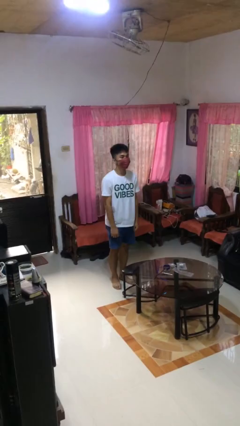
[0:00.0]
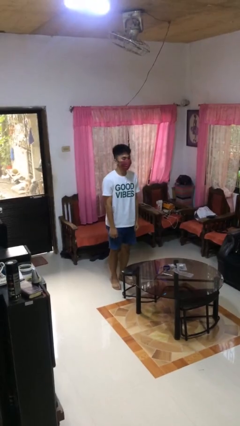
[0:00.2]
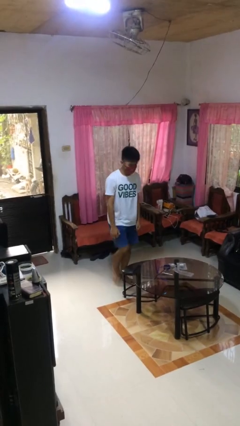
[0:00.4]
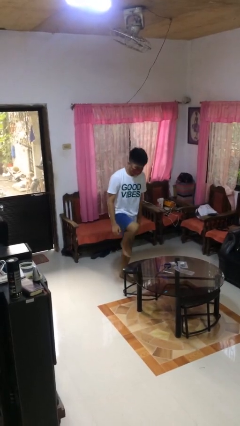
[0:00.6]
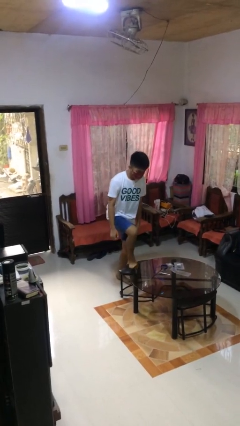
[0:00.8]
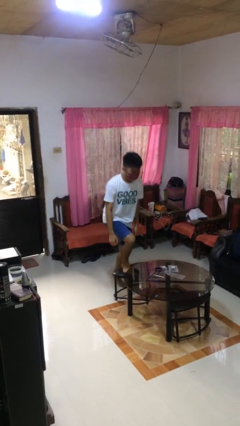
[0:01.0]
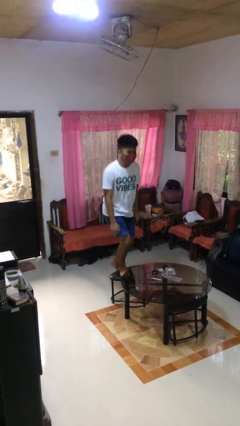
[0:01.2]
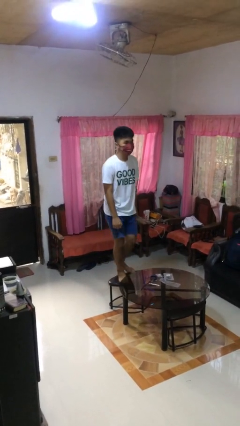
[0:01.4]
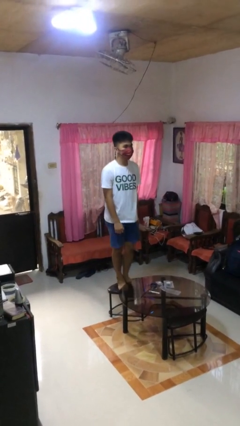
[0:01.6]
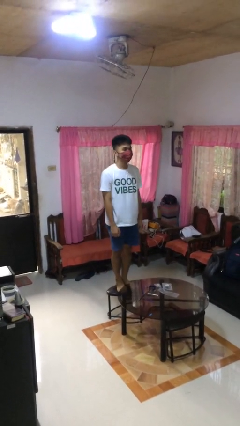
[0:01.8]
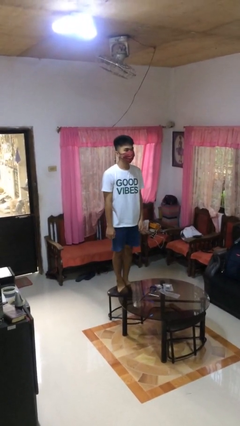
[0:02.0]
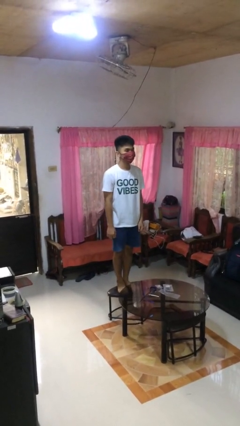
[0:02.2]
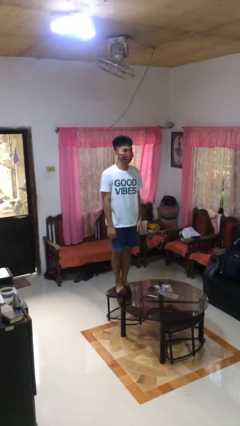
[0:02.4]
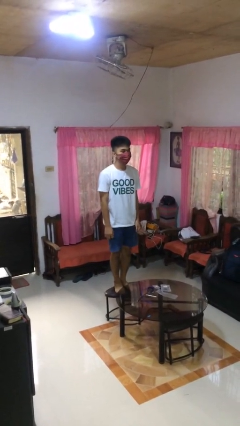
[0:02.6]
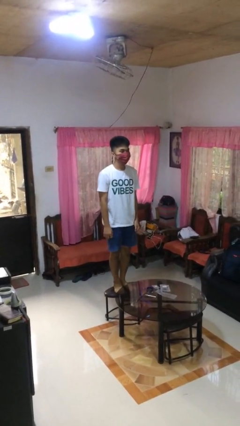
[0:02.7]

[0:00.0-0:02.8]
person climbs on chair

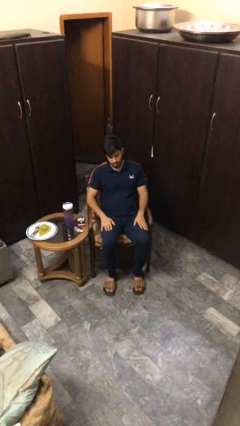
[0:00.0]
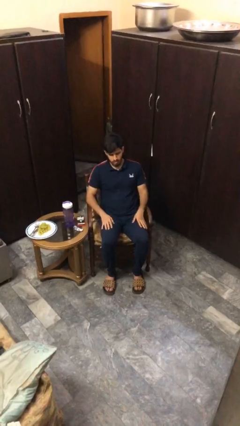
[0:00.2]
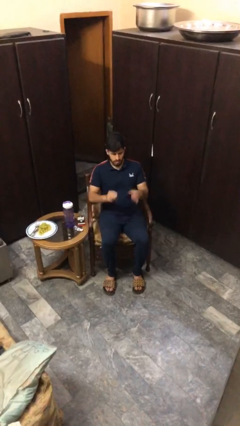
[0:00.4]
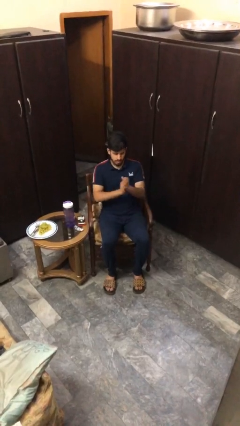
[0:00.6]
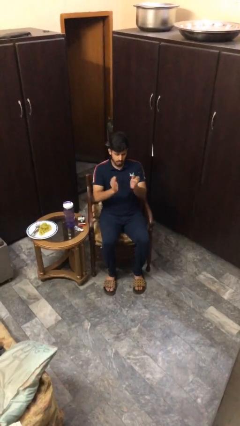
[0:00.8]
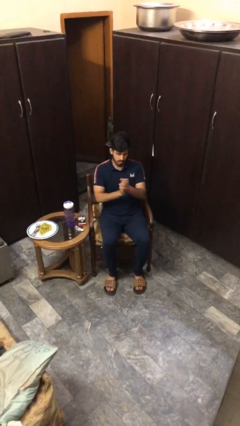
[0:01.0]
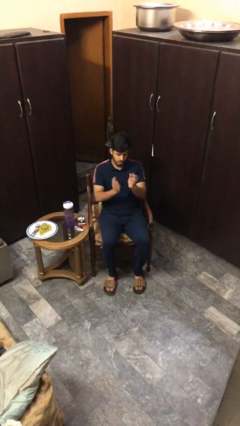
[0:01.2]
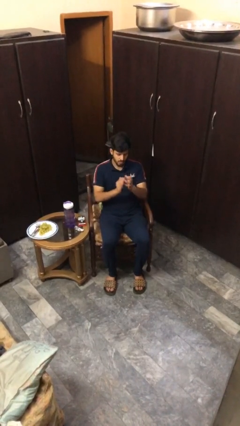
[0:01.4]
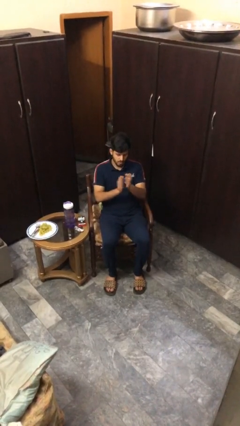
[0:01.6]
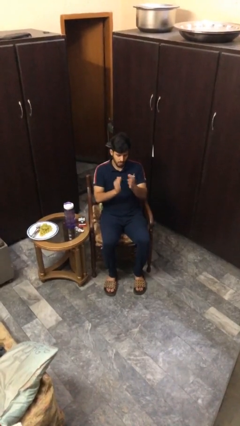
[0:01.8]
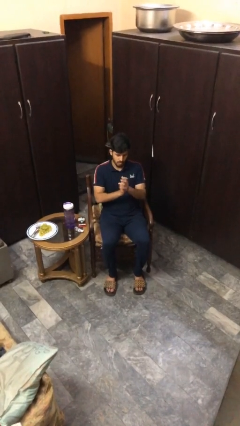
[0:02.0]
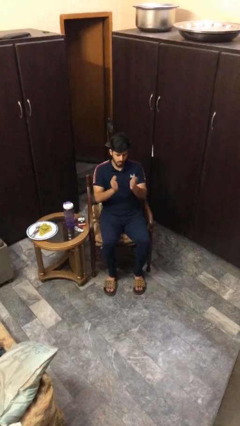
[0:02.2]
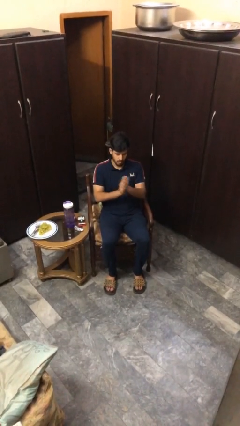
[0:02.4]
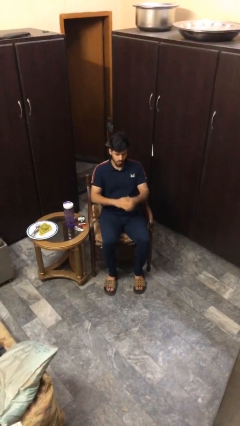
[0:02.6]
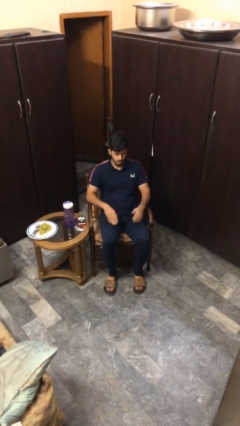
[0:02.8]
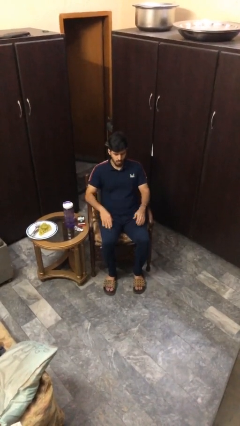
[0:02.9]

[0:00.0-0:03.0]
person claps hands

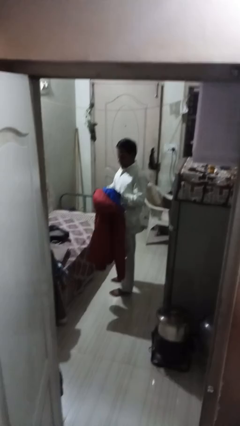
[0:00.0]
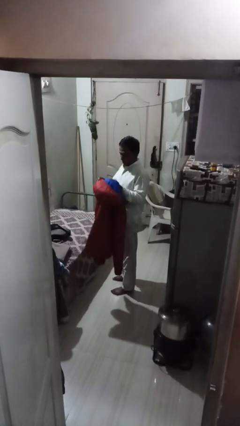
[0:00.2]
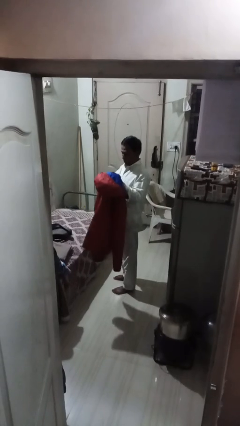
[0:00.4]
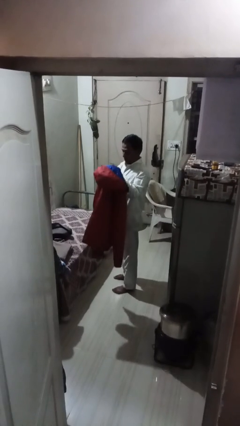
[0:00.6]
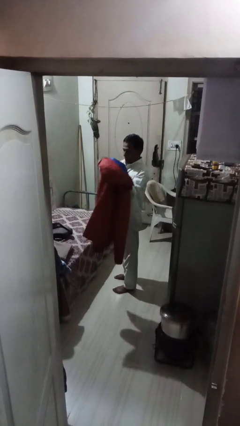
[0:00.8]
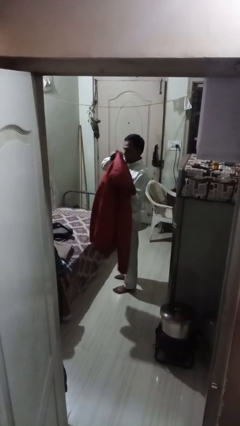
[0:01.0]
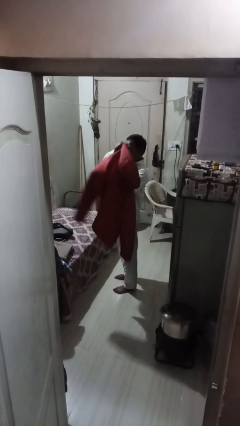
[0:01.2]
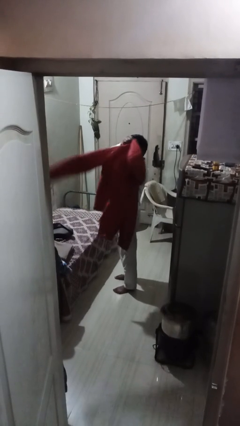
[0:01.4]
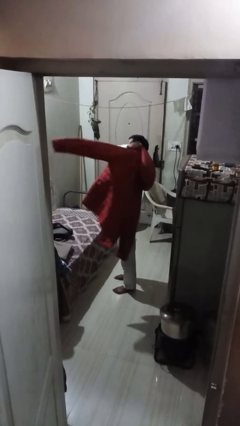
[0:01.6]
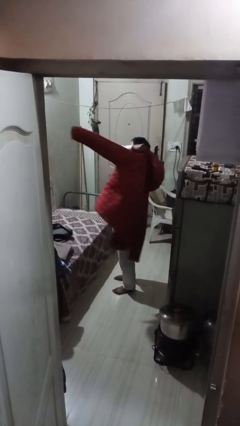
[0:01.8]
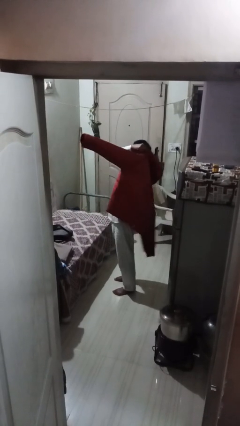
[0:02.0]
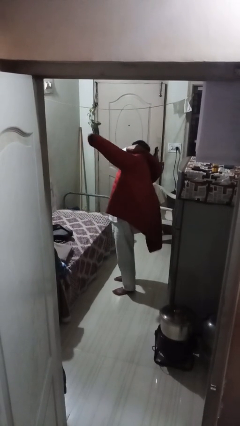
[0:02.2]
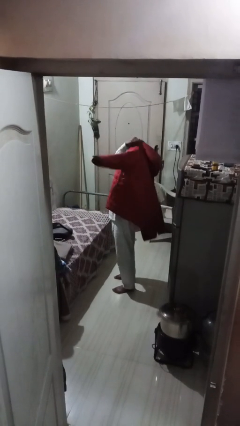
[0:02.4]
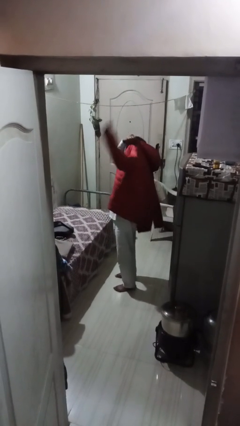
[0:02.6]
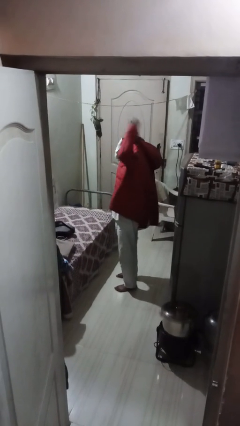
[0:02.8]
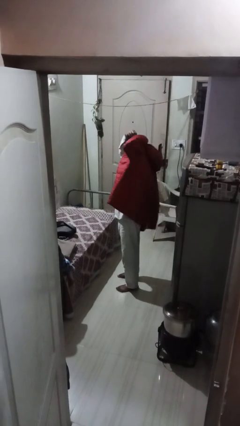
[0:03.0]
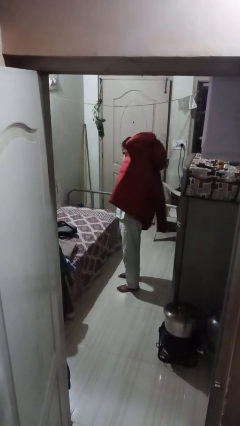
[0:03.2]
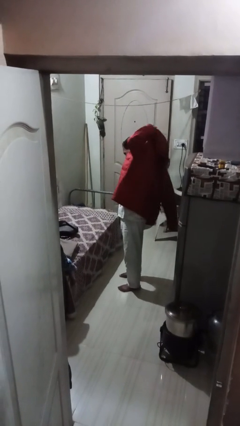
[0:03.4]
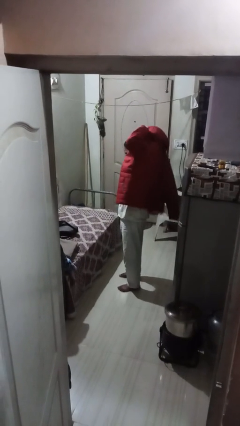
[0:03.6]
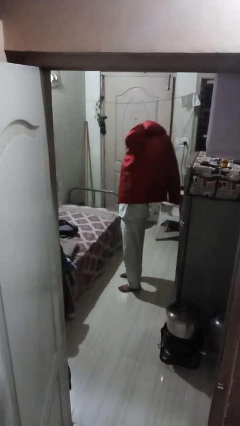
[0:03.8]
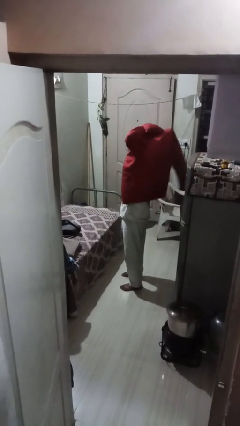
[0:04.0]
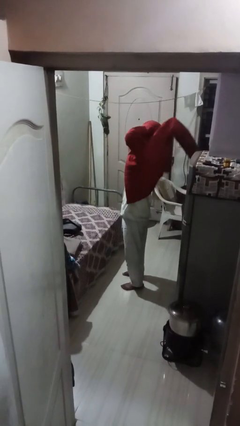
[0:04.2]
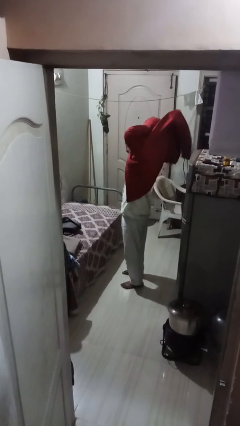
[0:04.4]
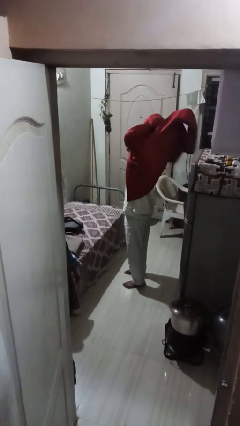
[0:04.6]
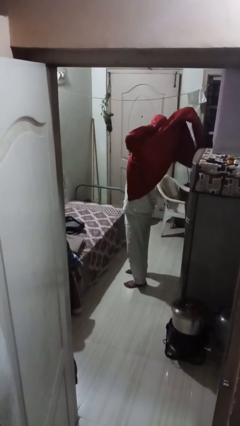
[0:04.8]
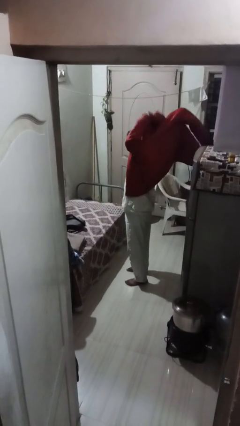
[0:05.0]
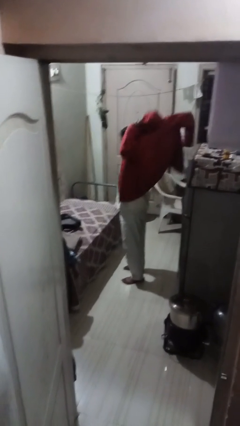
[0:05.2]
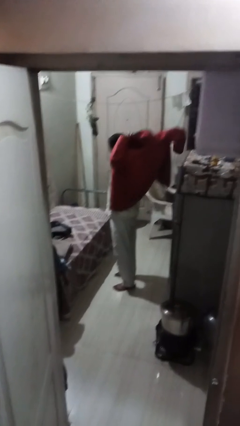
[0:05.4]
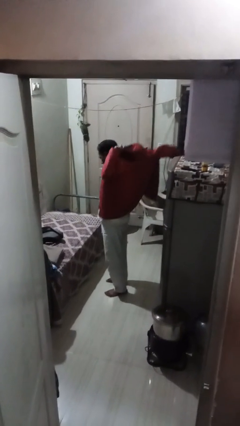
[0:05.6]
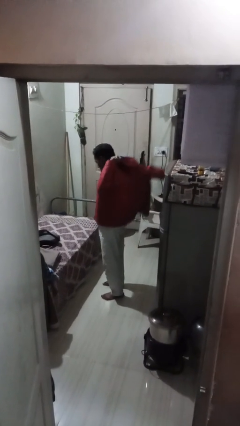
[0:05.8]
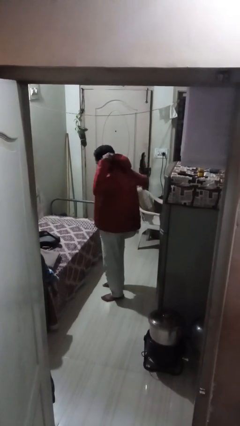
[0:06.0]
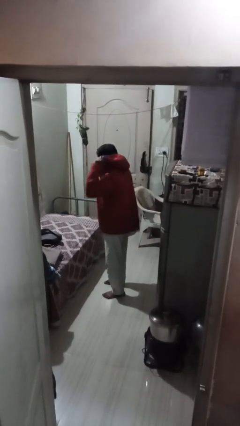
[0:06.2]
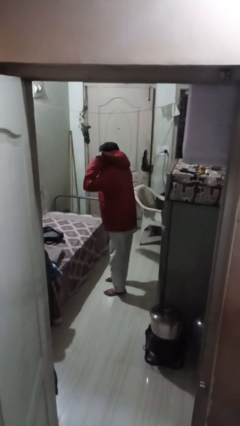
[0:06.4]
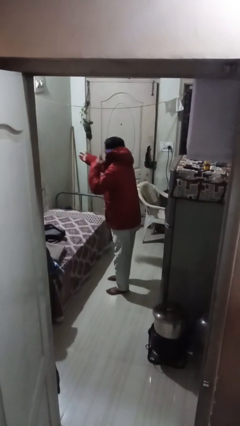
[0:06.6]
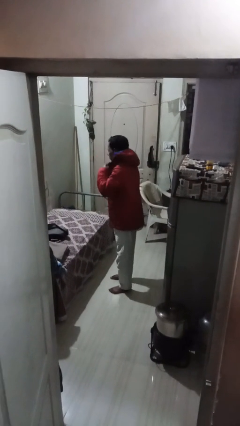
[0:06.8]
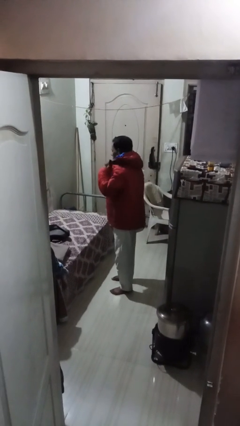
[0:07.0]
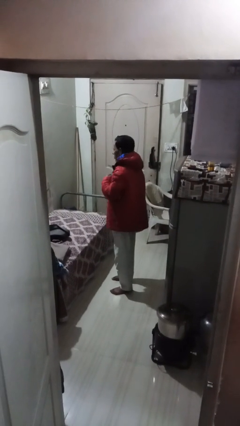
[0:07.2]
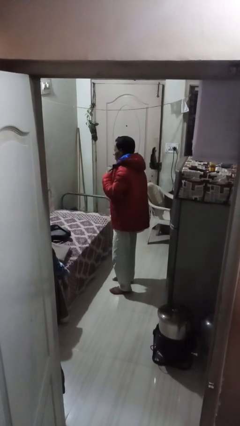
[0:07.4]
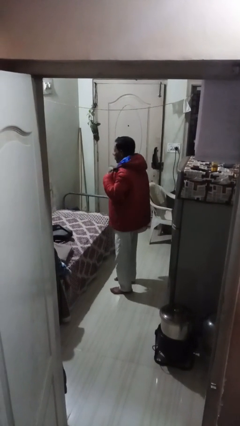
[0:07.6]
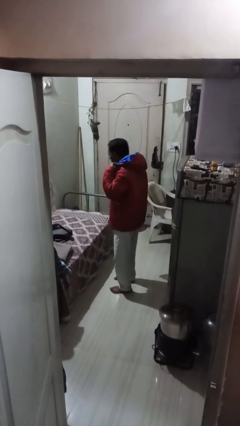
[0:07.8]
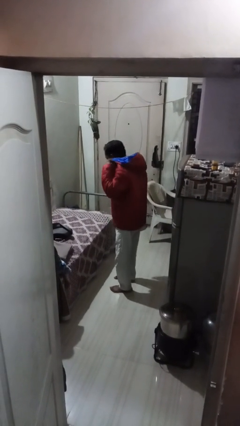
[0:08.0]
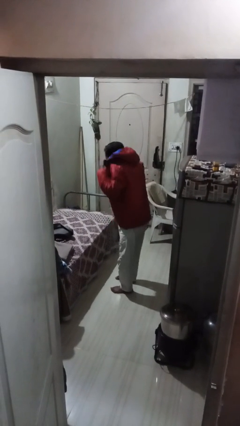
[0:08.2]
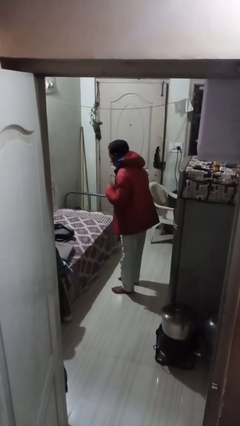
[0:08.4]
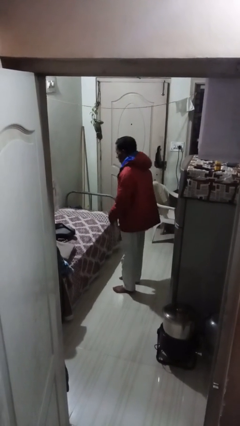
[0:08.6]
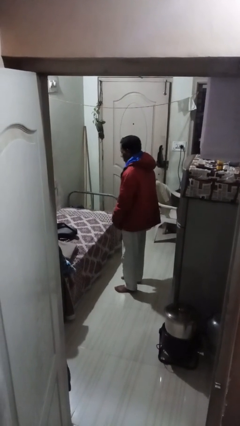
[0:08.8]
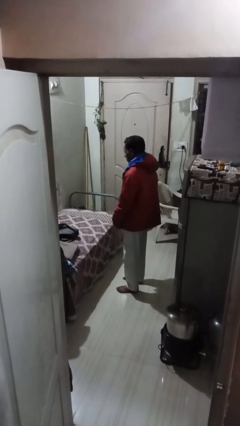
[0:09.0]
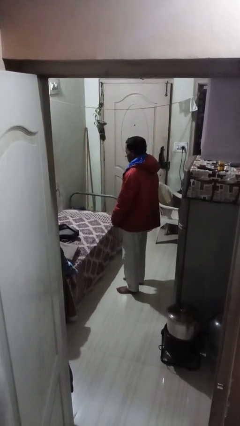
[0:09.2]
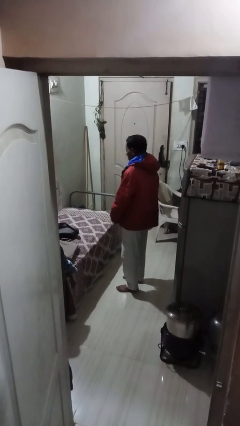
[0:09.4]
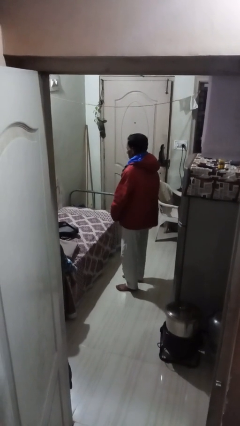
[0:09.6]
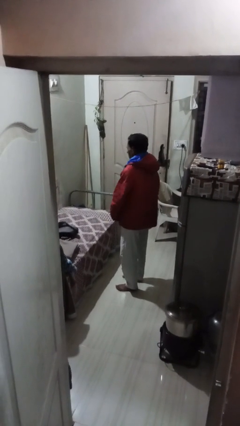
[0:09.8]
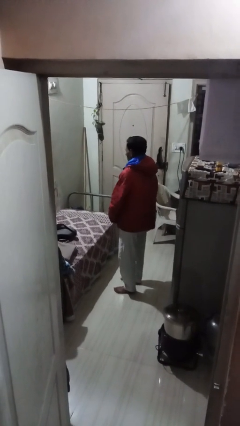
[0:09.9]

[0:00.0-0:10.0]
person puts on jacket

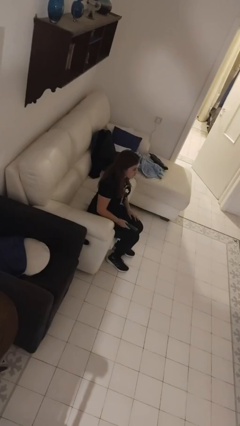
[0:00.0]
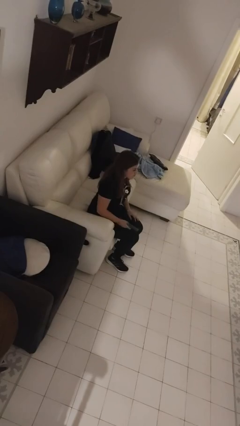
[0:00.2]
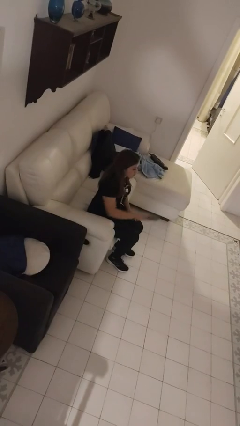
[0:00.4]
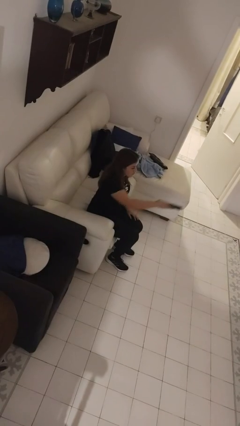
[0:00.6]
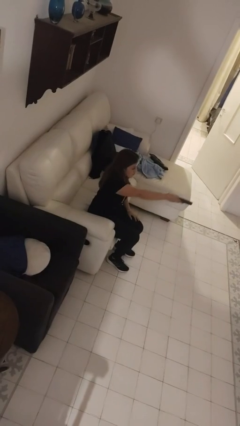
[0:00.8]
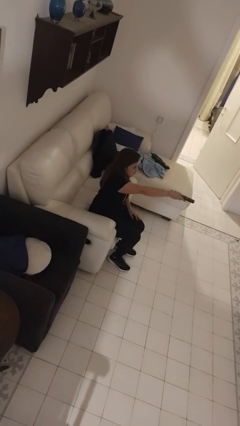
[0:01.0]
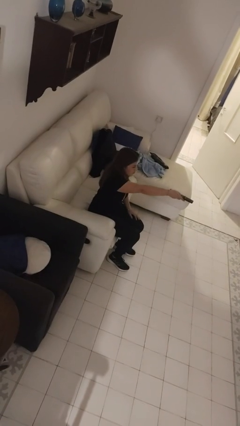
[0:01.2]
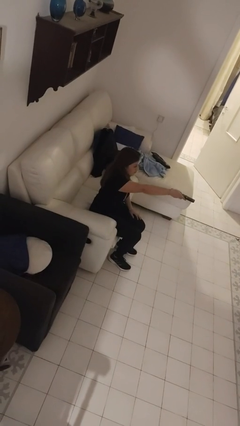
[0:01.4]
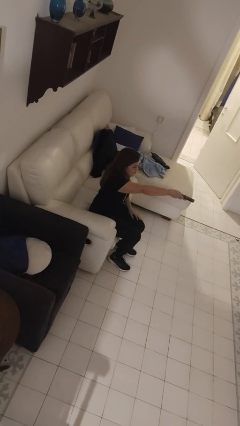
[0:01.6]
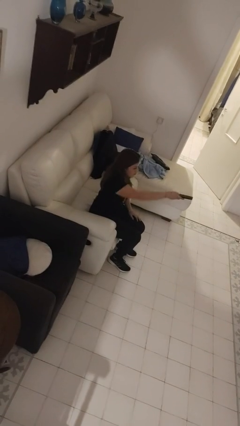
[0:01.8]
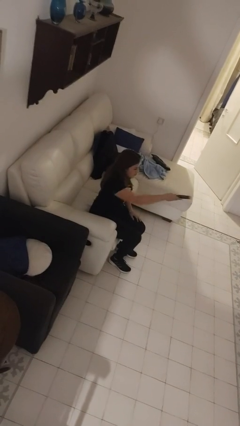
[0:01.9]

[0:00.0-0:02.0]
person uses television remote

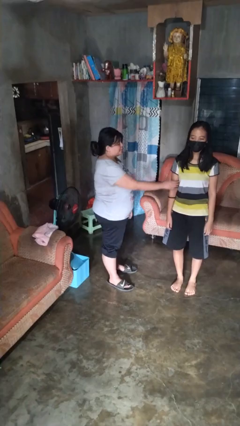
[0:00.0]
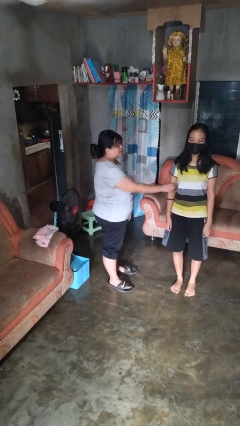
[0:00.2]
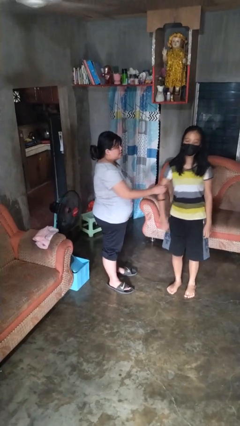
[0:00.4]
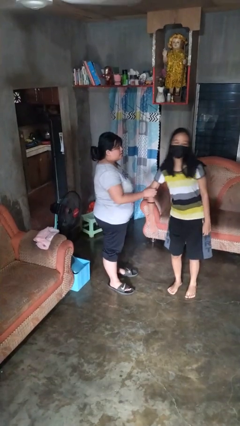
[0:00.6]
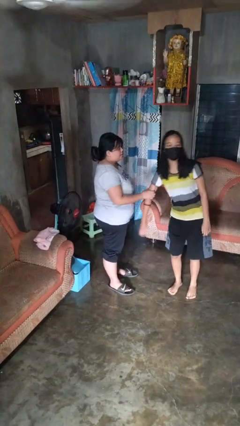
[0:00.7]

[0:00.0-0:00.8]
person grabs person by bicep
